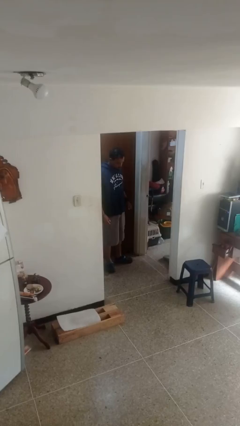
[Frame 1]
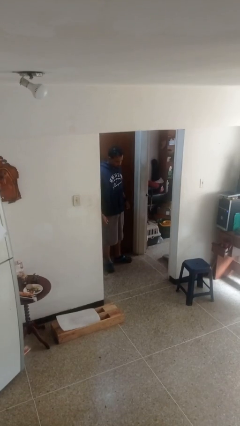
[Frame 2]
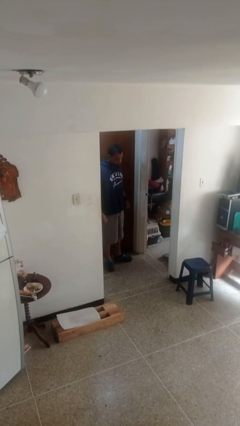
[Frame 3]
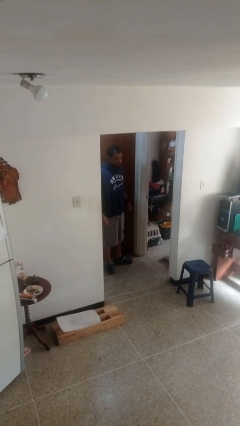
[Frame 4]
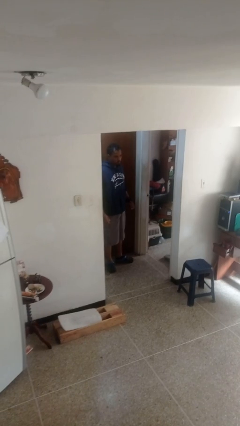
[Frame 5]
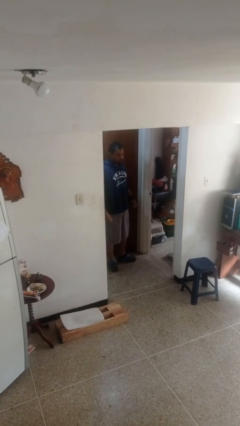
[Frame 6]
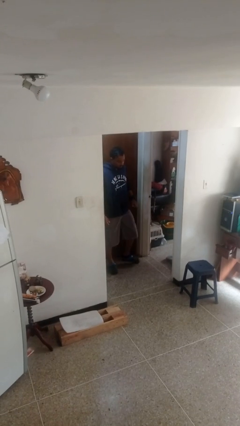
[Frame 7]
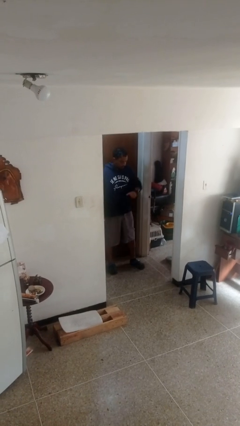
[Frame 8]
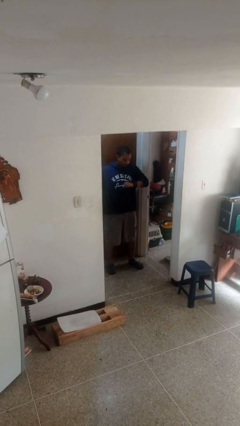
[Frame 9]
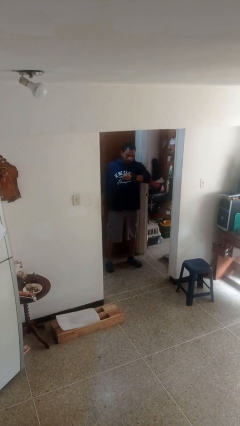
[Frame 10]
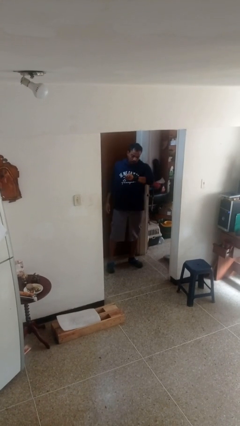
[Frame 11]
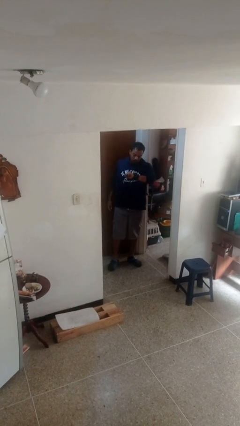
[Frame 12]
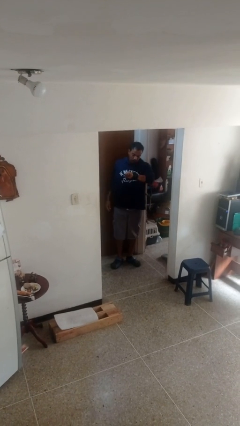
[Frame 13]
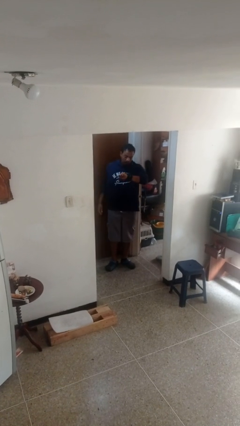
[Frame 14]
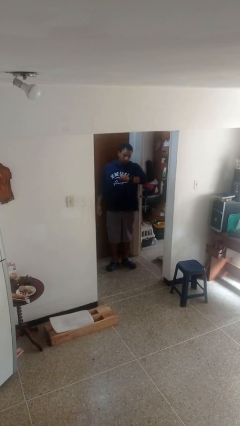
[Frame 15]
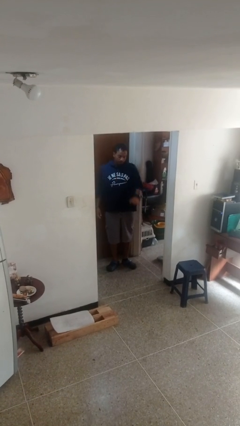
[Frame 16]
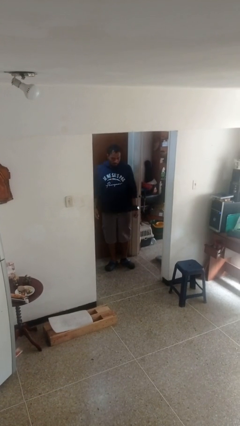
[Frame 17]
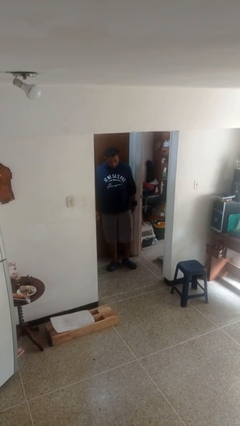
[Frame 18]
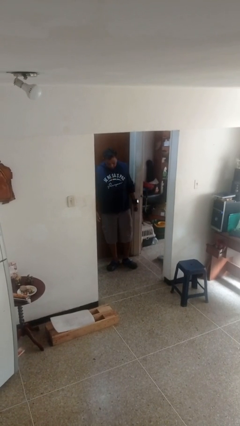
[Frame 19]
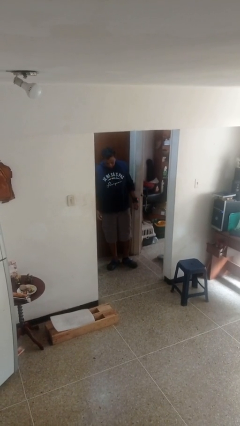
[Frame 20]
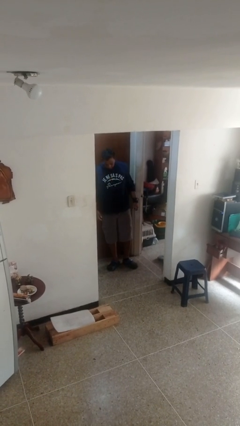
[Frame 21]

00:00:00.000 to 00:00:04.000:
person looks at wristwatch

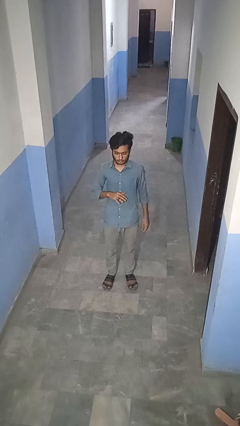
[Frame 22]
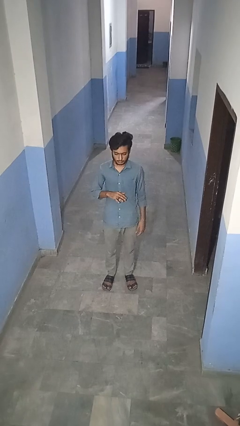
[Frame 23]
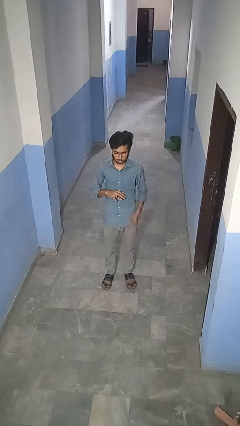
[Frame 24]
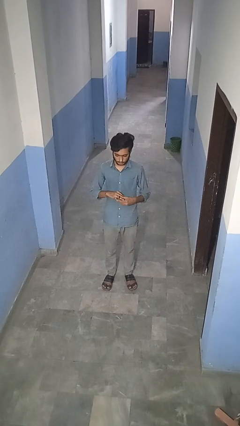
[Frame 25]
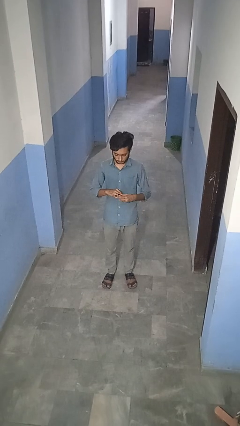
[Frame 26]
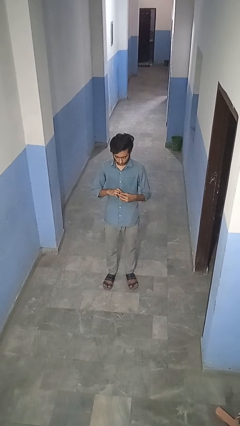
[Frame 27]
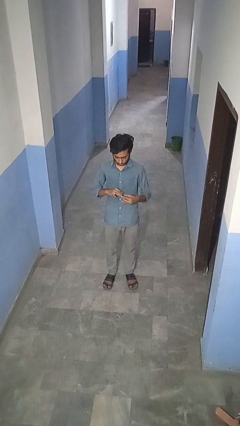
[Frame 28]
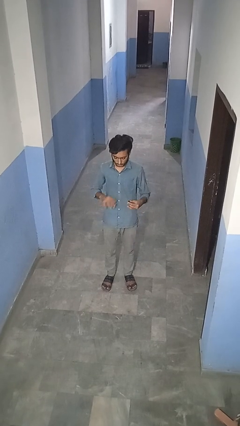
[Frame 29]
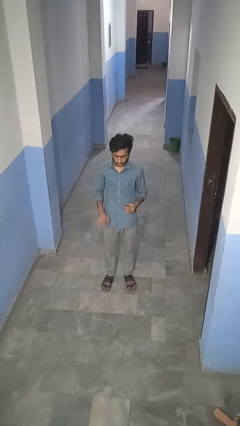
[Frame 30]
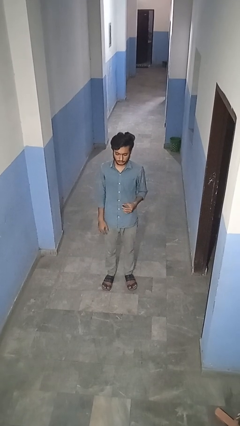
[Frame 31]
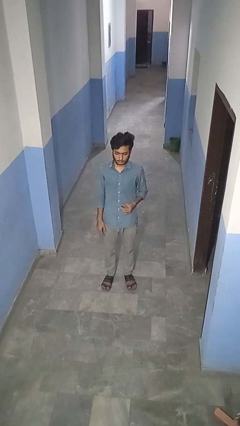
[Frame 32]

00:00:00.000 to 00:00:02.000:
person takes off ring

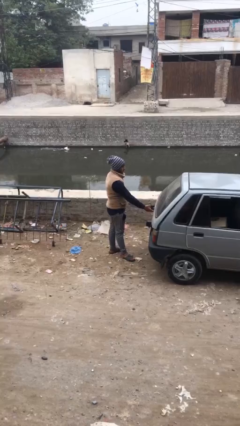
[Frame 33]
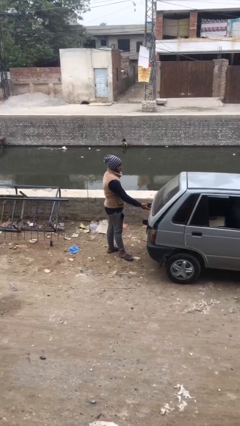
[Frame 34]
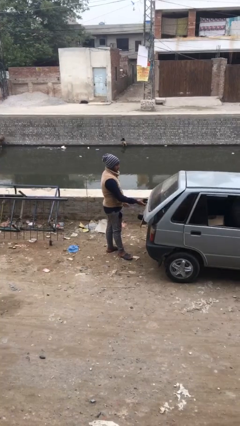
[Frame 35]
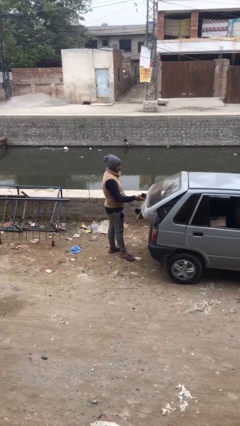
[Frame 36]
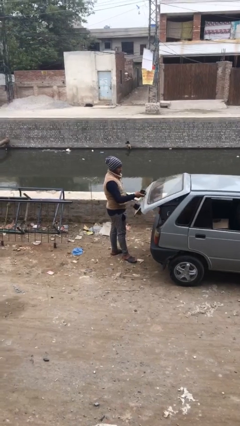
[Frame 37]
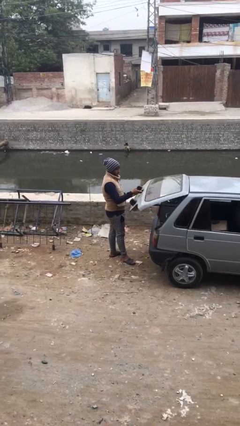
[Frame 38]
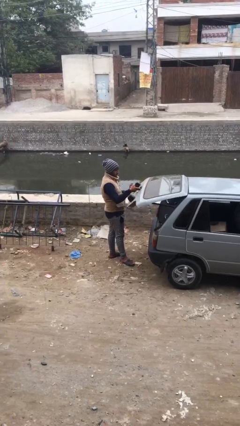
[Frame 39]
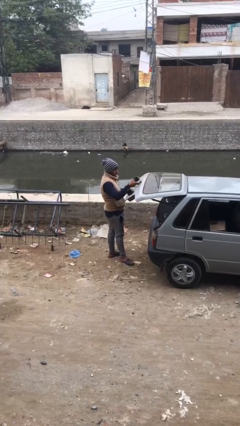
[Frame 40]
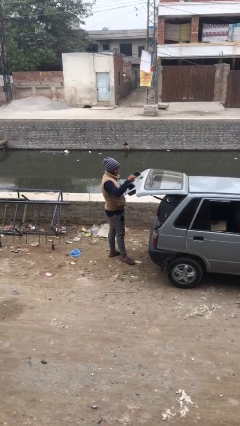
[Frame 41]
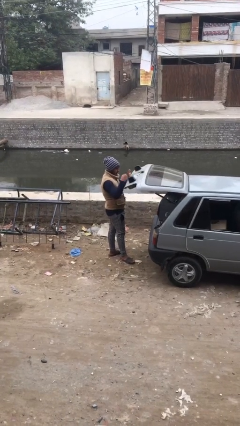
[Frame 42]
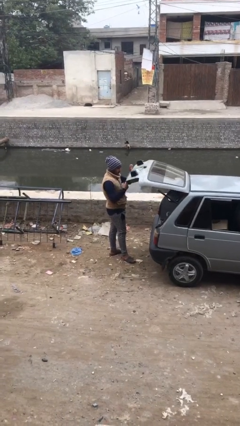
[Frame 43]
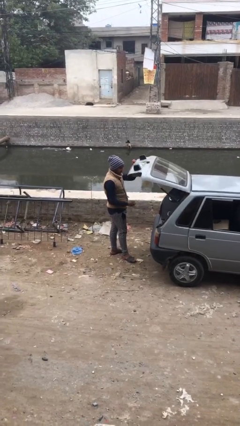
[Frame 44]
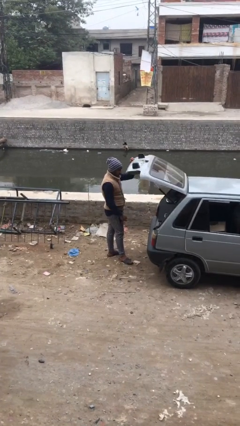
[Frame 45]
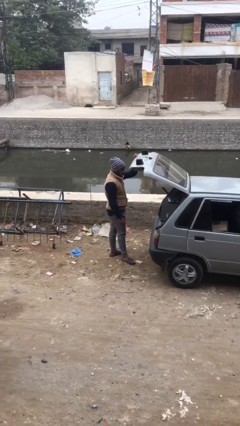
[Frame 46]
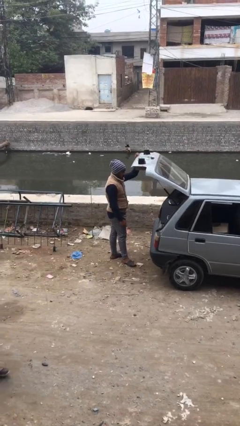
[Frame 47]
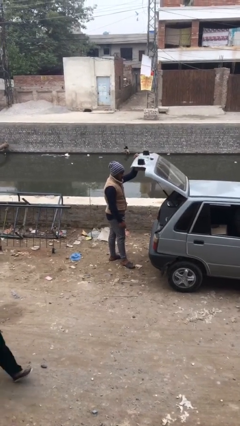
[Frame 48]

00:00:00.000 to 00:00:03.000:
person opens car trunk

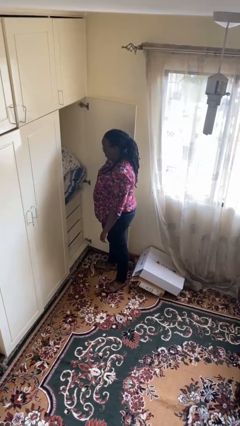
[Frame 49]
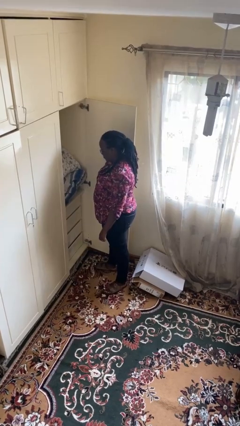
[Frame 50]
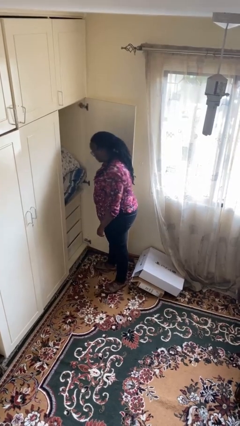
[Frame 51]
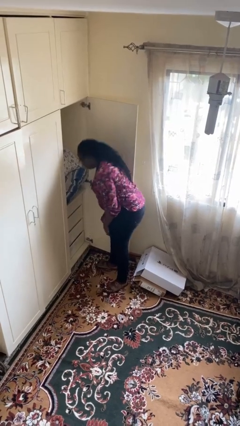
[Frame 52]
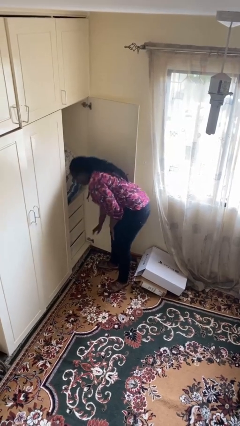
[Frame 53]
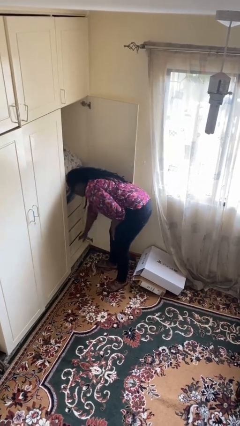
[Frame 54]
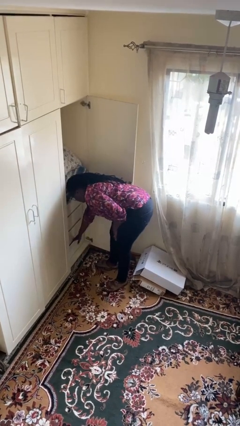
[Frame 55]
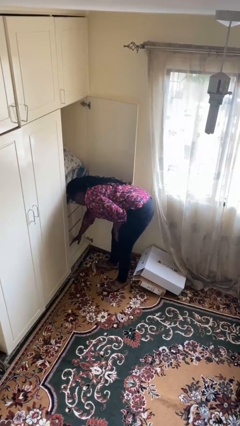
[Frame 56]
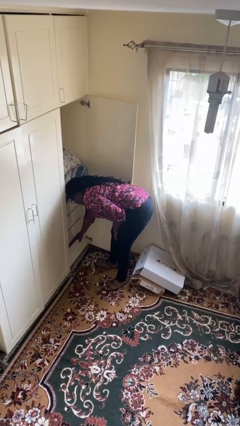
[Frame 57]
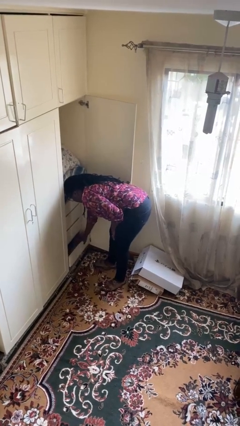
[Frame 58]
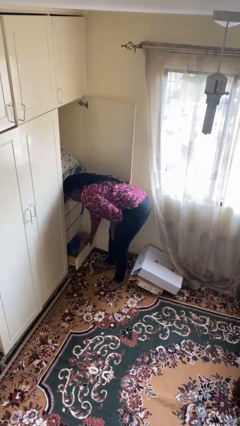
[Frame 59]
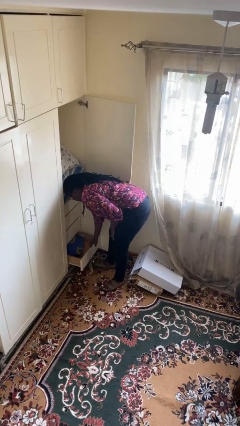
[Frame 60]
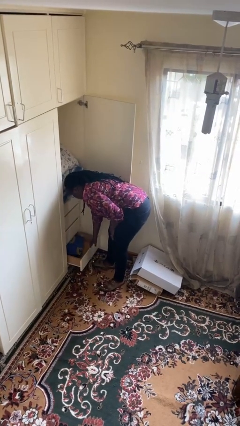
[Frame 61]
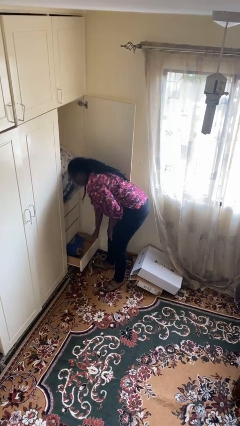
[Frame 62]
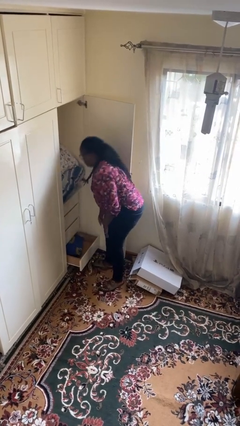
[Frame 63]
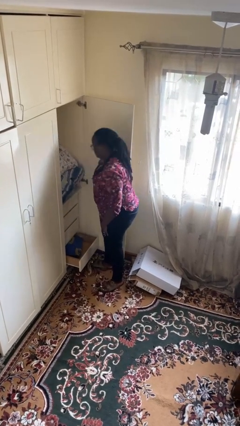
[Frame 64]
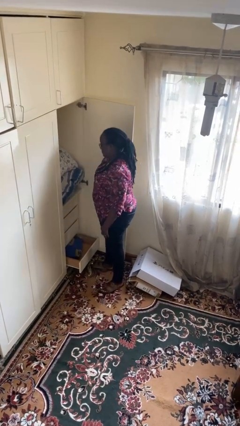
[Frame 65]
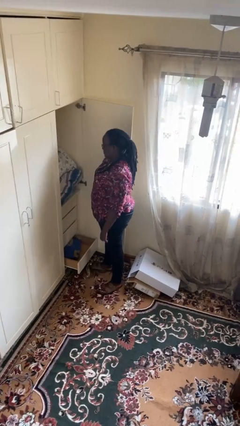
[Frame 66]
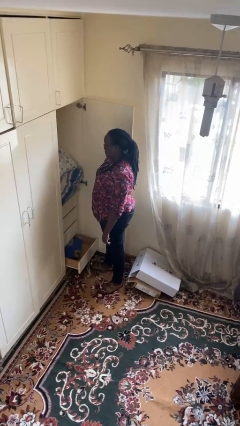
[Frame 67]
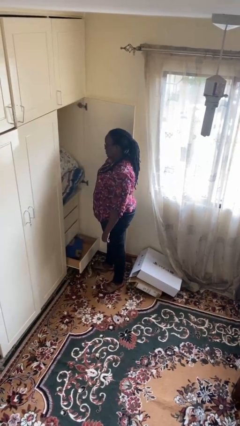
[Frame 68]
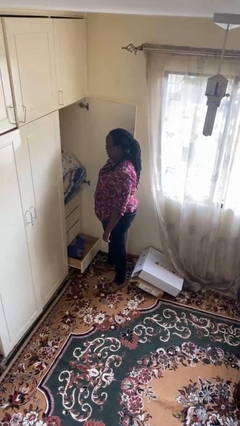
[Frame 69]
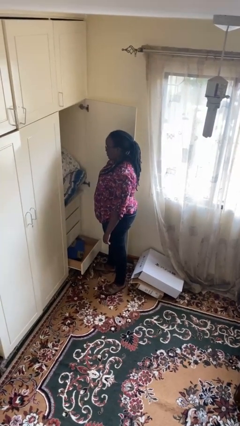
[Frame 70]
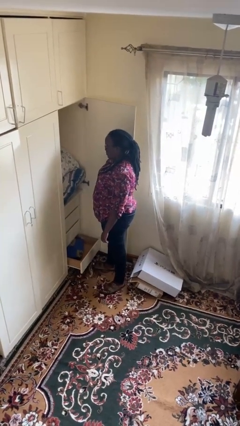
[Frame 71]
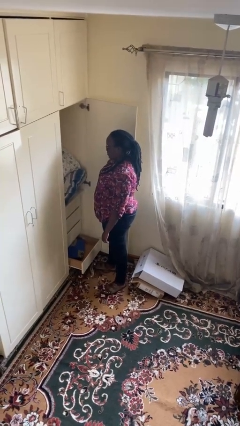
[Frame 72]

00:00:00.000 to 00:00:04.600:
person opens dresser drawer

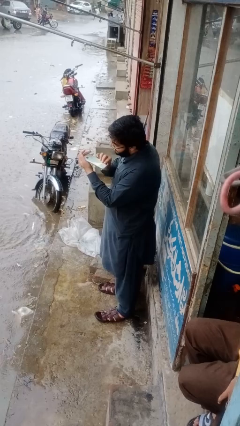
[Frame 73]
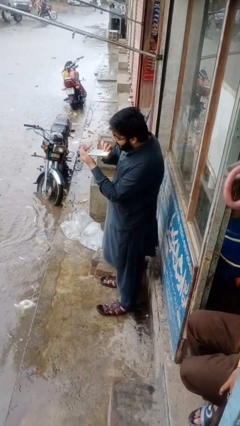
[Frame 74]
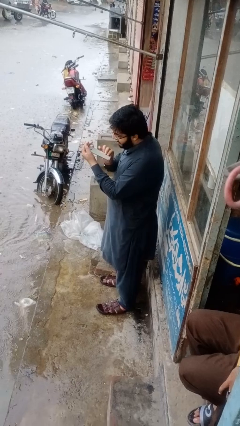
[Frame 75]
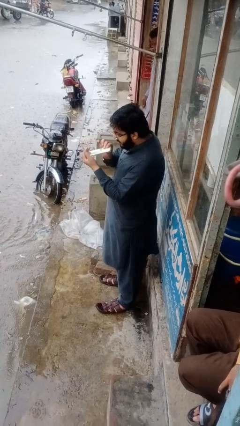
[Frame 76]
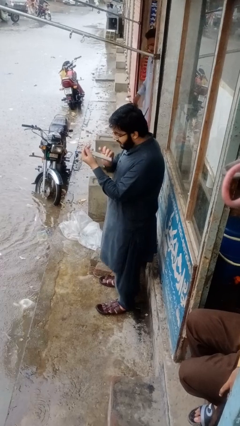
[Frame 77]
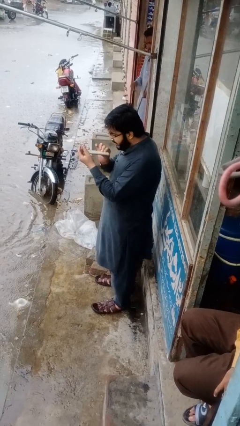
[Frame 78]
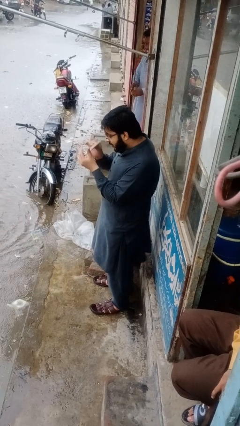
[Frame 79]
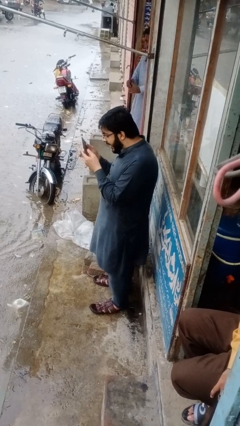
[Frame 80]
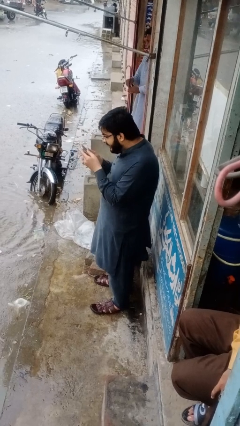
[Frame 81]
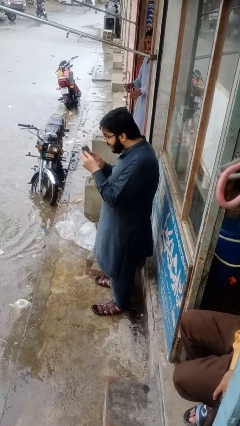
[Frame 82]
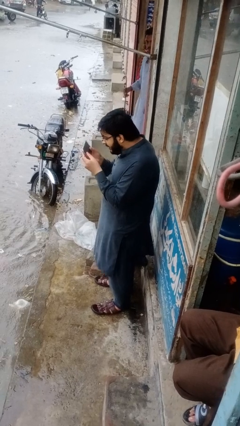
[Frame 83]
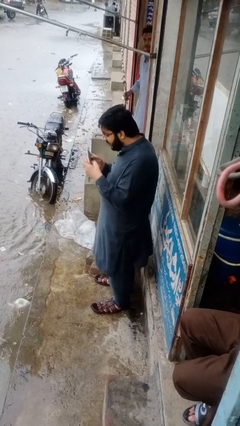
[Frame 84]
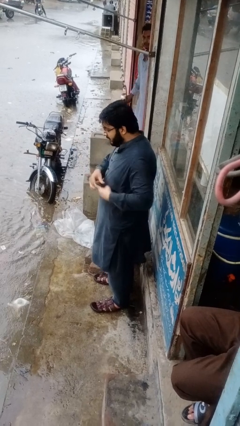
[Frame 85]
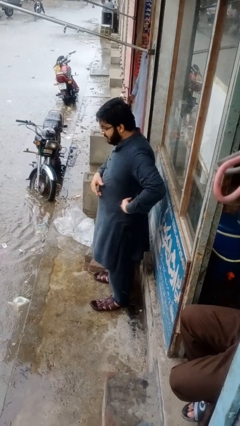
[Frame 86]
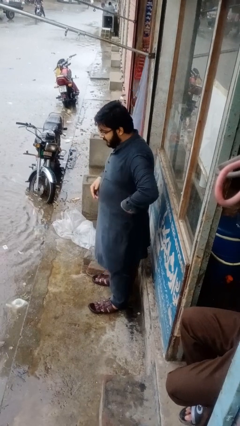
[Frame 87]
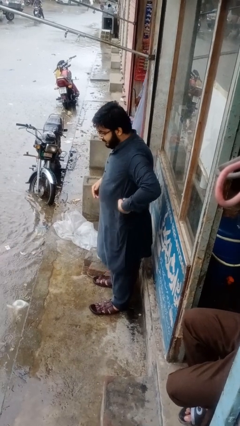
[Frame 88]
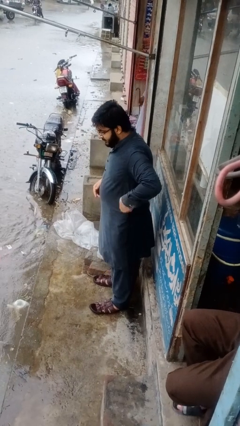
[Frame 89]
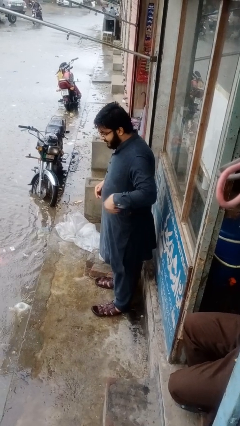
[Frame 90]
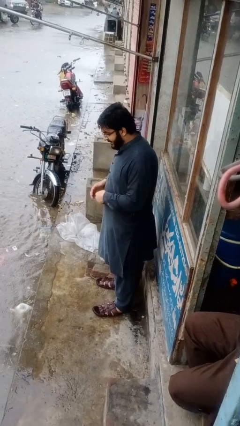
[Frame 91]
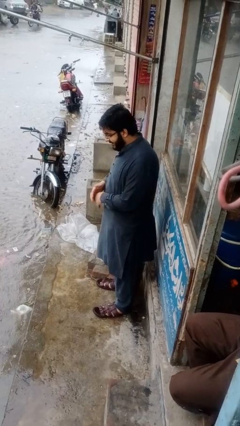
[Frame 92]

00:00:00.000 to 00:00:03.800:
person puts phone into pocket
